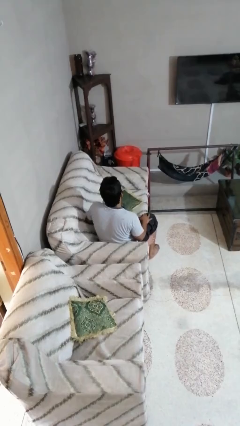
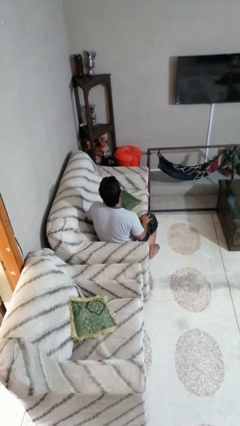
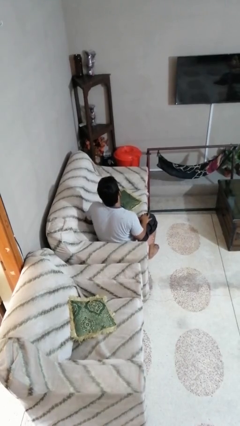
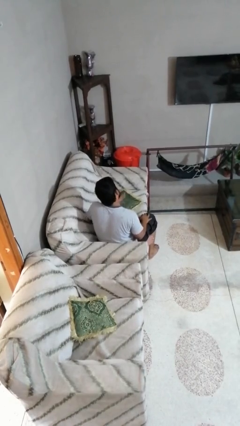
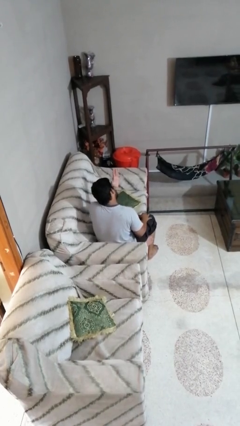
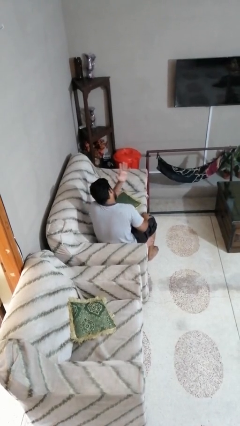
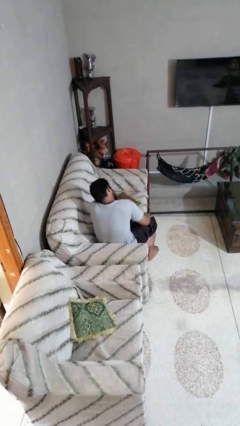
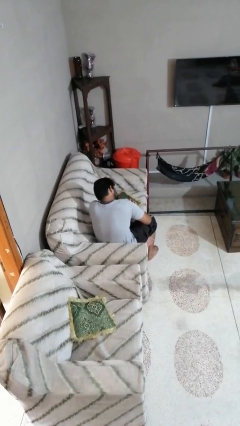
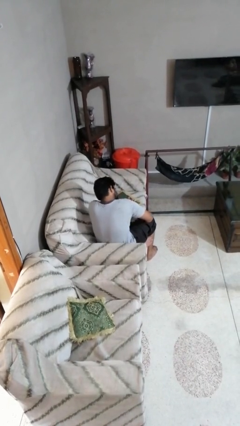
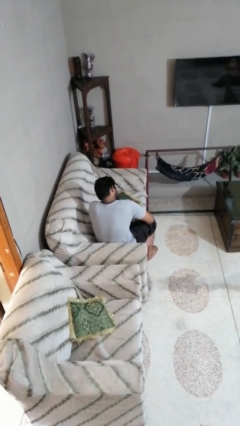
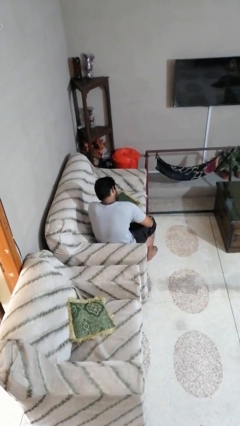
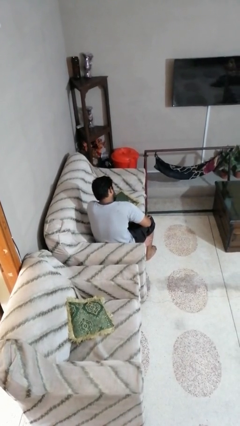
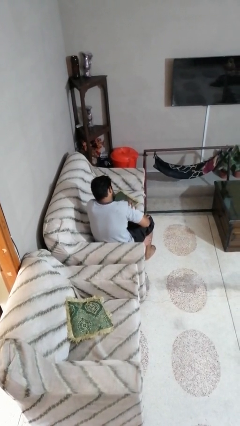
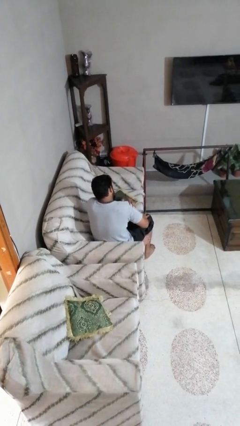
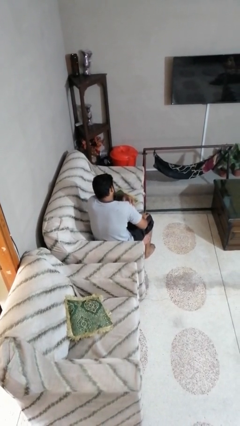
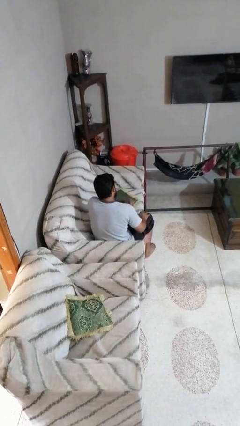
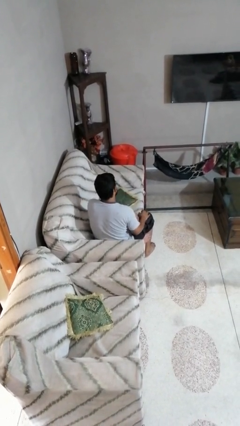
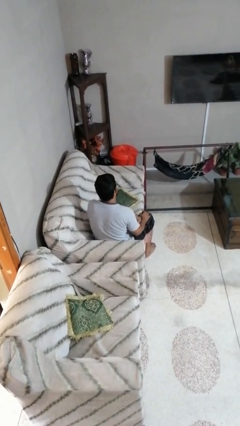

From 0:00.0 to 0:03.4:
person swats bug

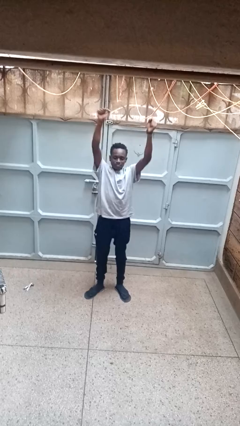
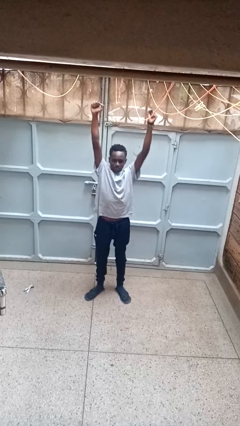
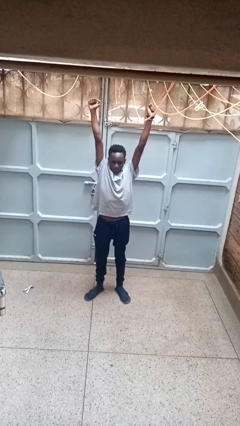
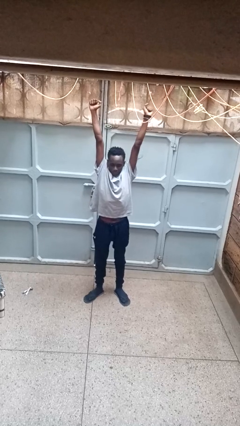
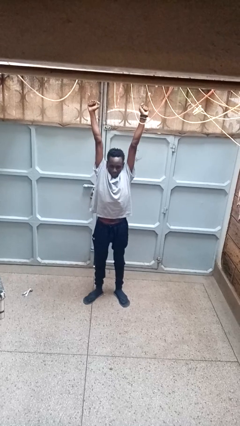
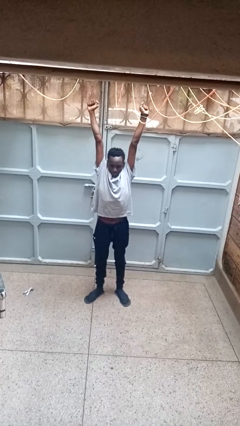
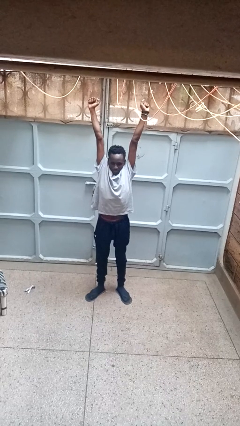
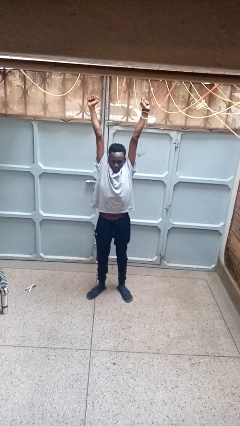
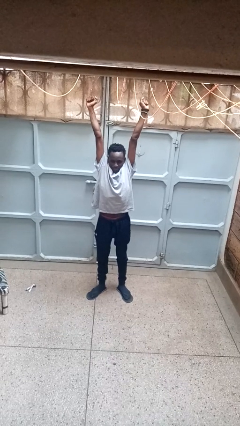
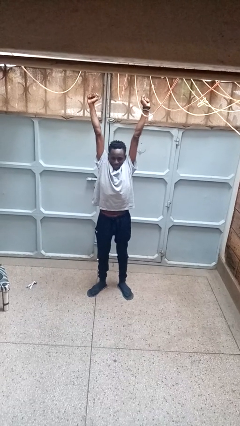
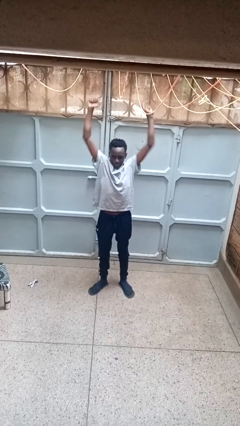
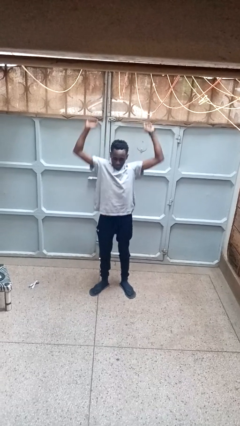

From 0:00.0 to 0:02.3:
person stretches arms over head

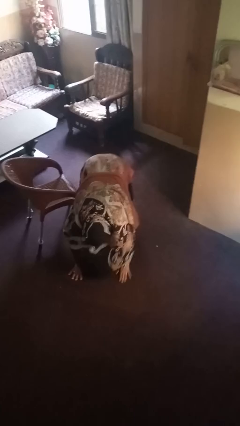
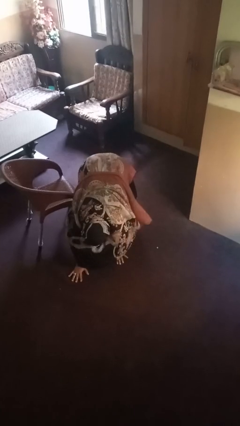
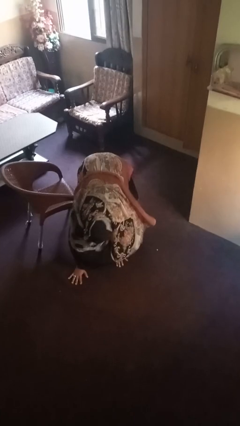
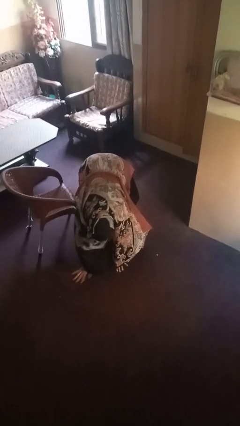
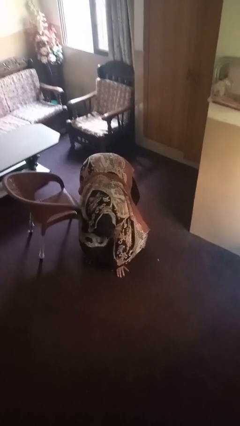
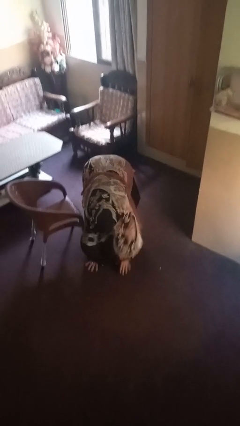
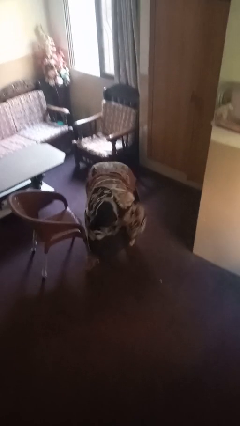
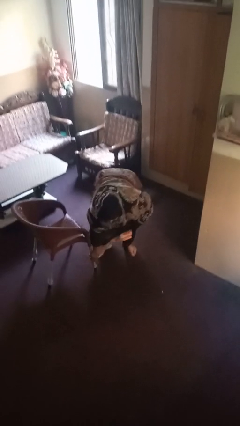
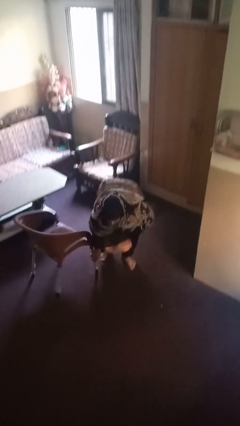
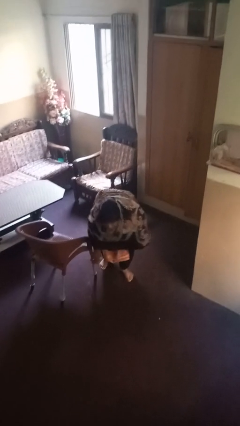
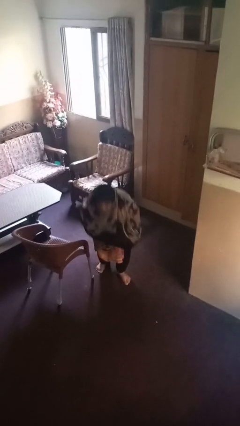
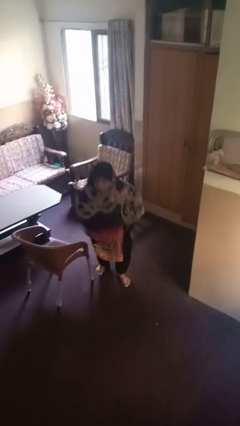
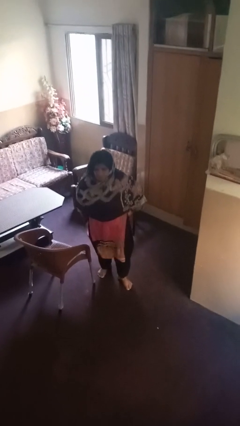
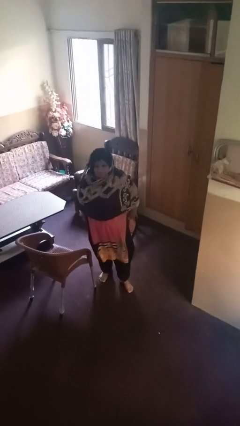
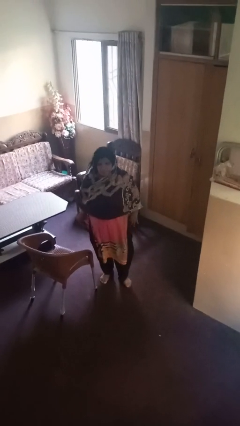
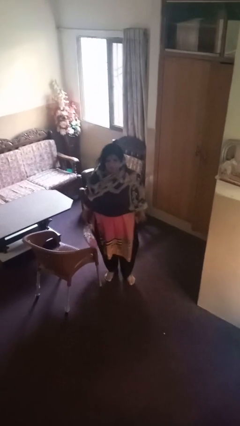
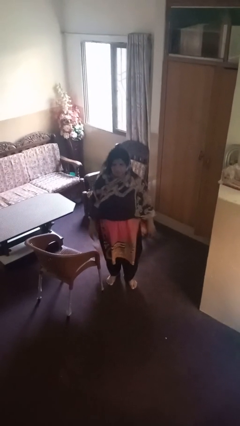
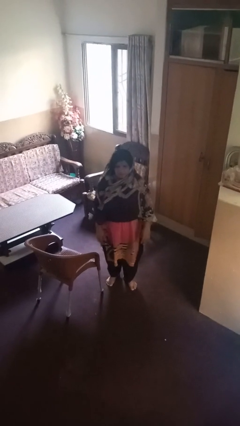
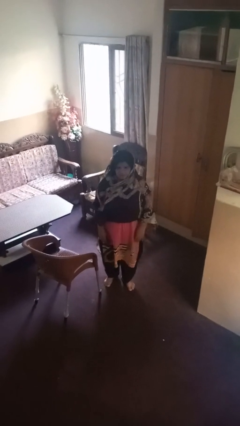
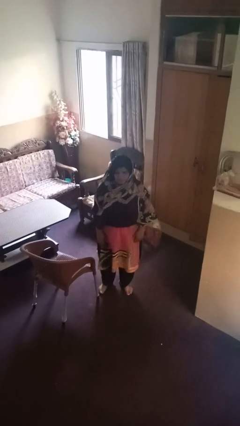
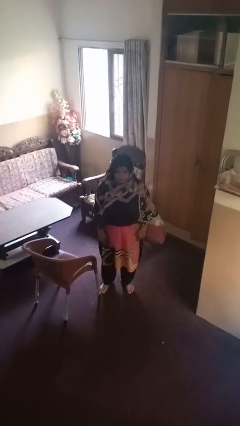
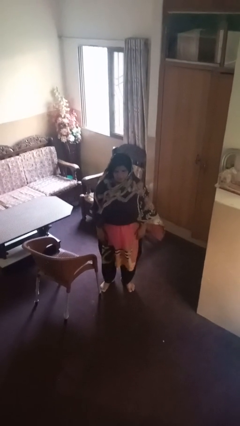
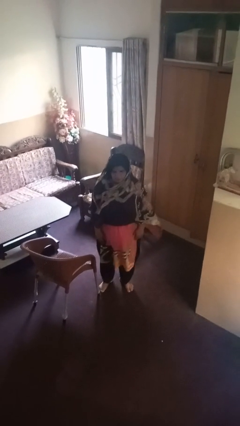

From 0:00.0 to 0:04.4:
person stands up from floor

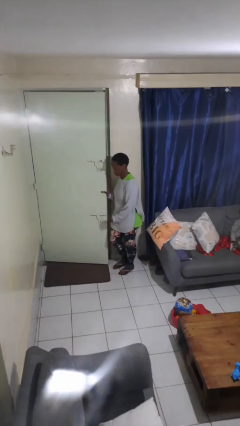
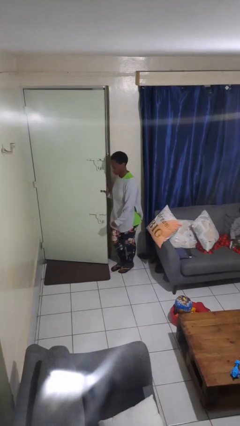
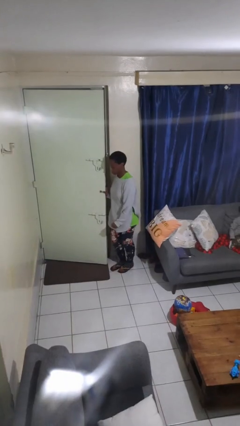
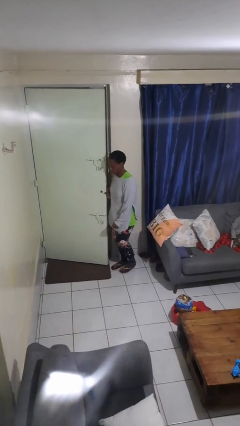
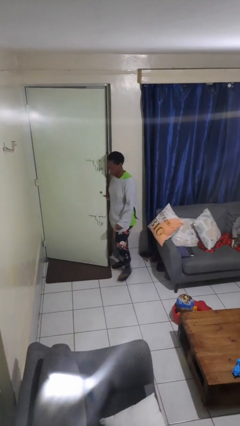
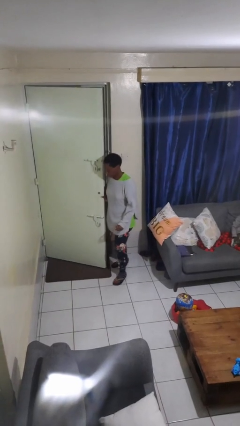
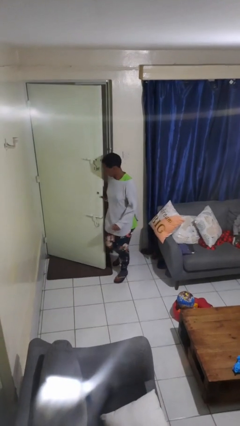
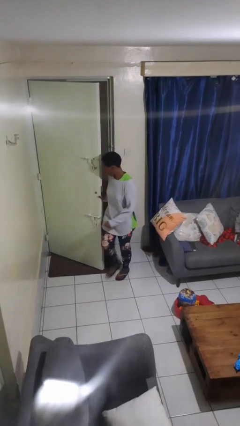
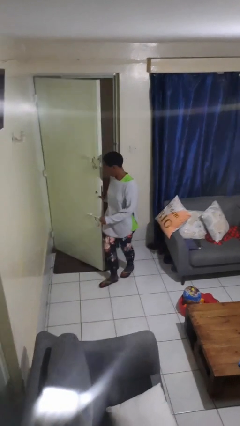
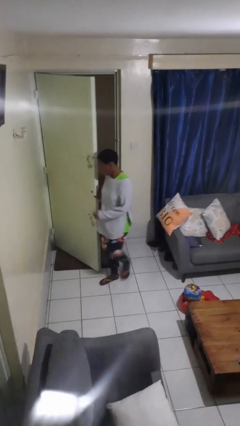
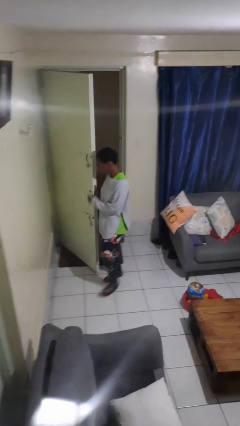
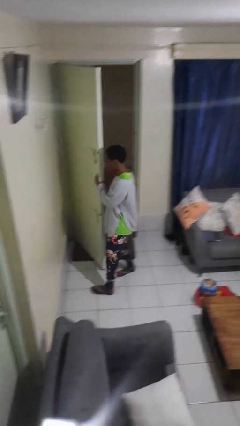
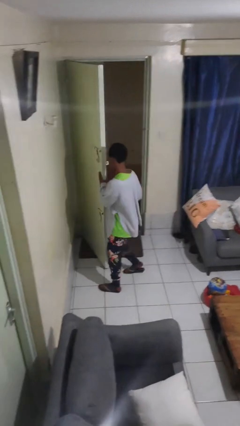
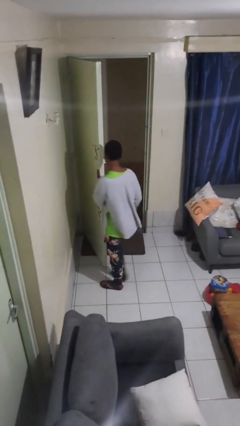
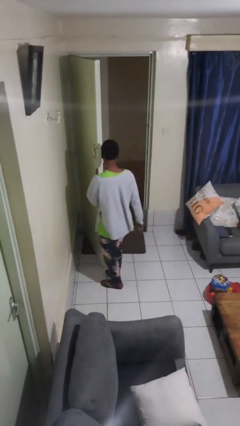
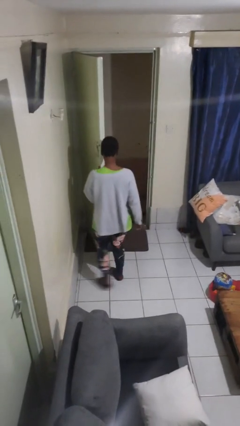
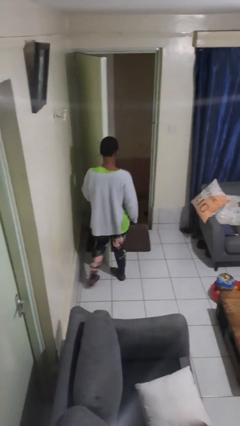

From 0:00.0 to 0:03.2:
person opens facility door

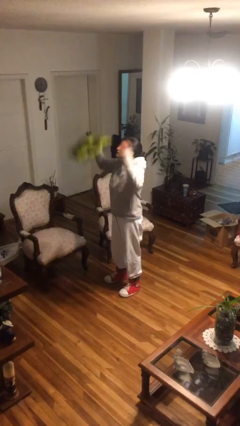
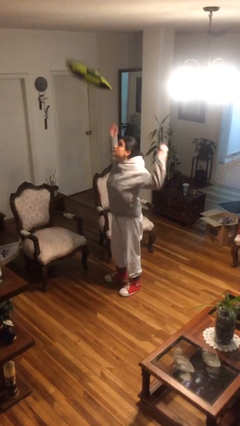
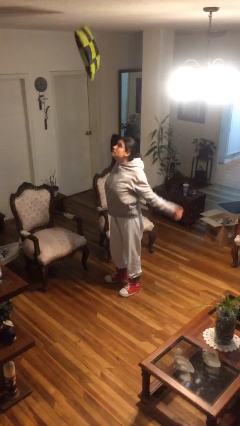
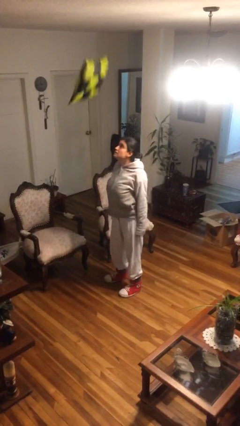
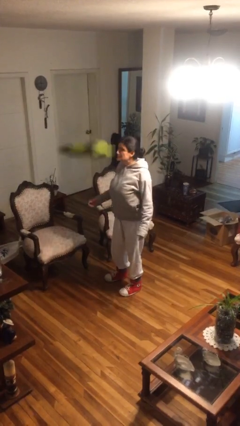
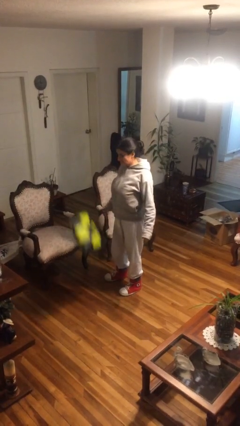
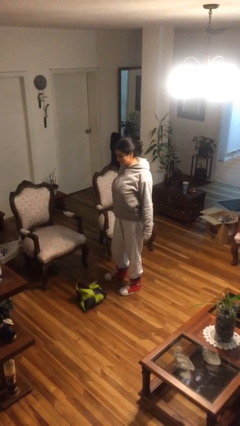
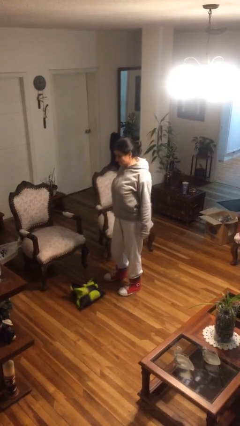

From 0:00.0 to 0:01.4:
person throws object into air

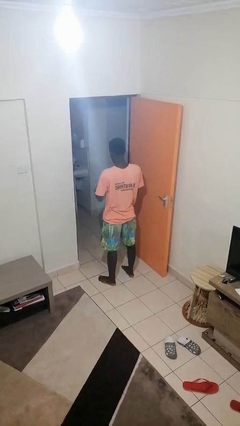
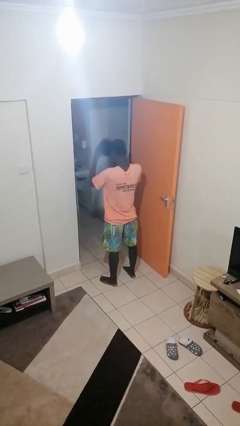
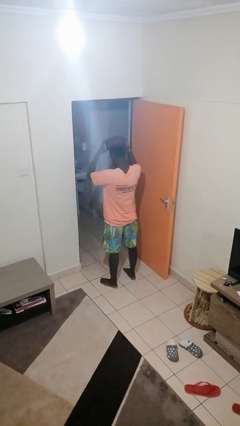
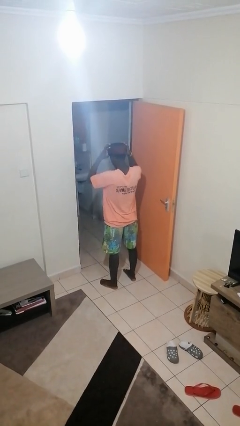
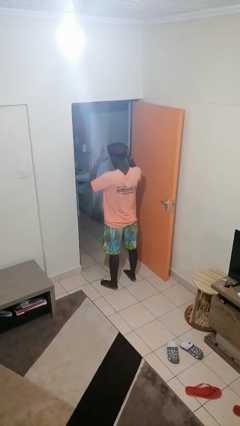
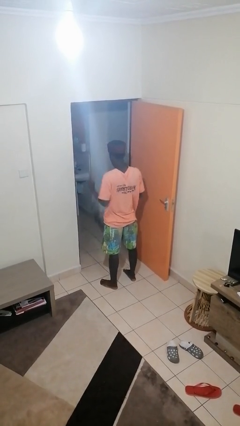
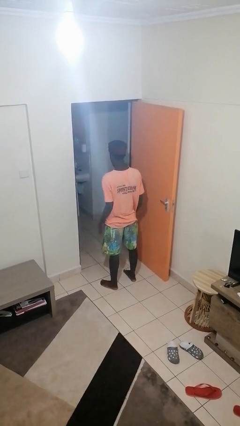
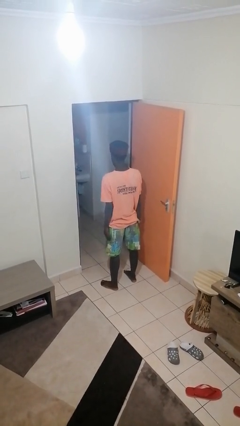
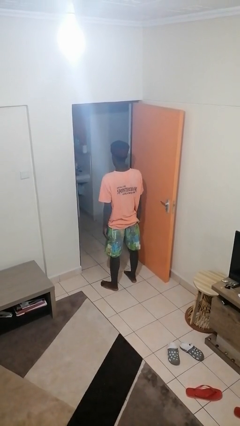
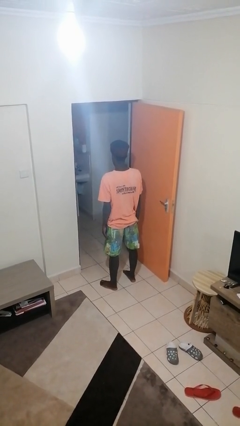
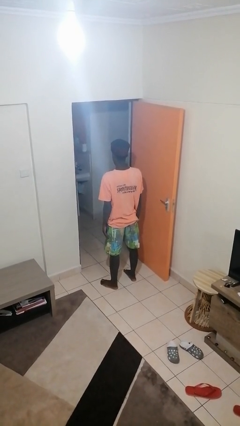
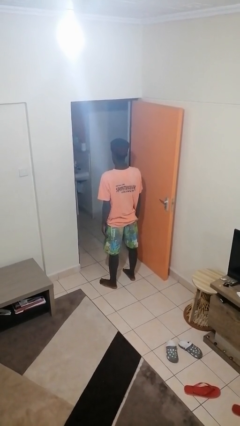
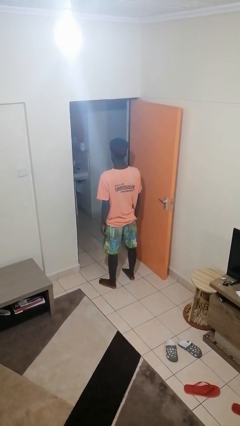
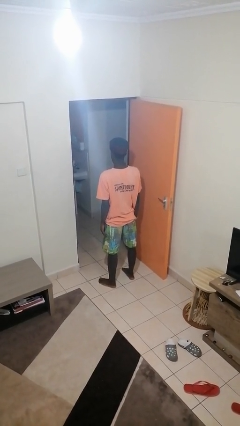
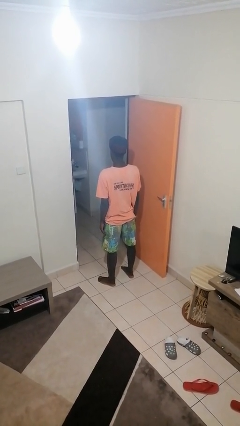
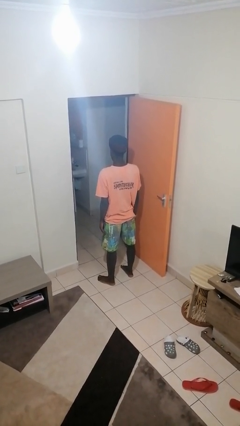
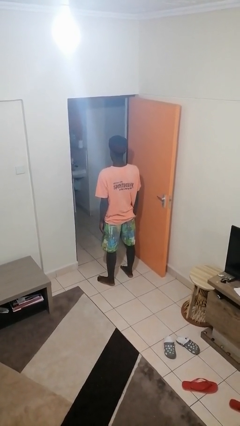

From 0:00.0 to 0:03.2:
person puts on hat
